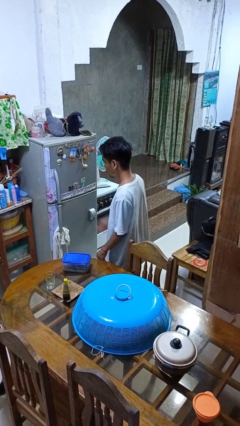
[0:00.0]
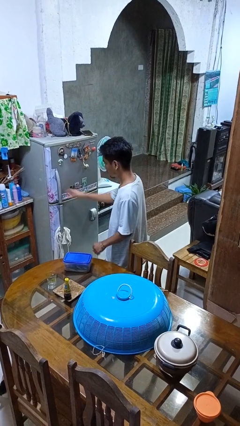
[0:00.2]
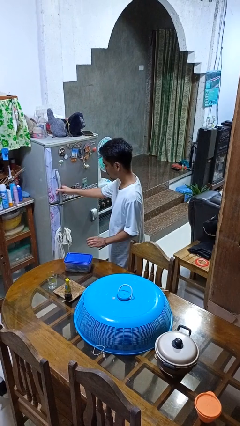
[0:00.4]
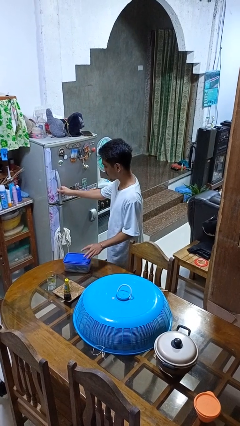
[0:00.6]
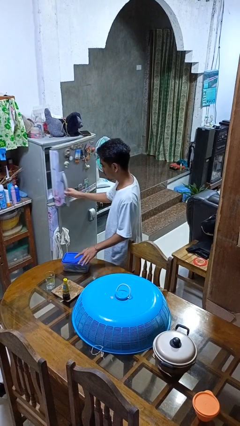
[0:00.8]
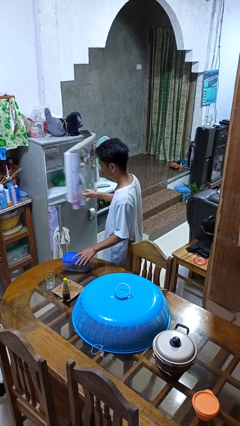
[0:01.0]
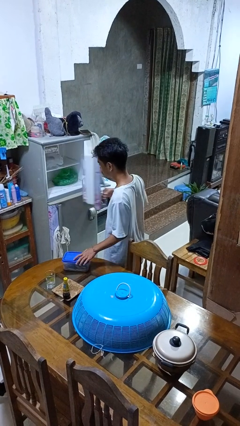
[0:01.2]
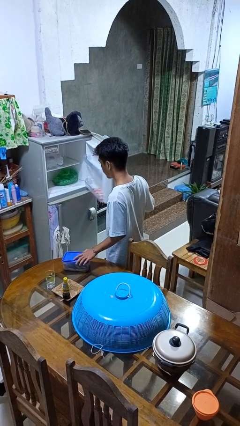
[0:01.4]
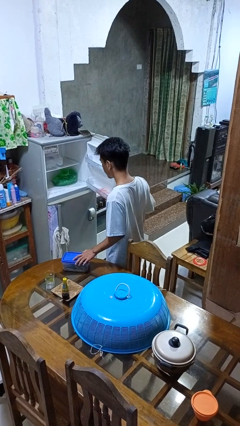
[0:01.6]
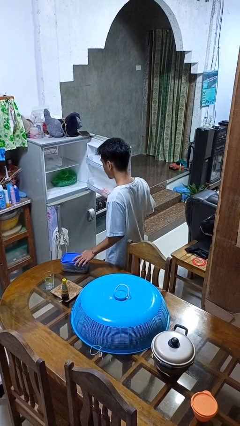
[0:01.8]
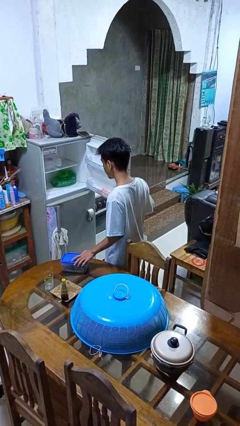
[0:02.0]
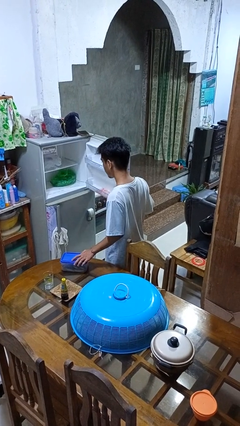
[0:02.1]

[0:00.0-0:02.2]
person opens refrigerator

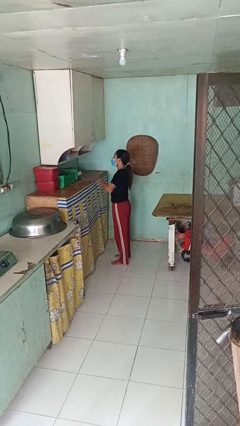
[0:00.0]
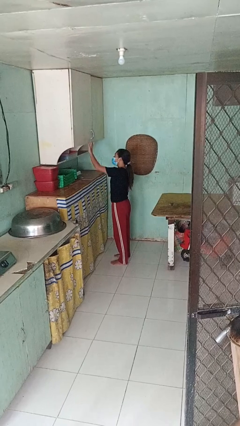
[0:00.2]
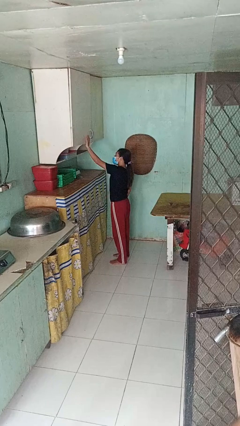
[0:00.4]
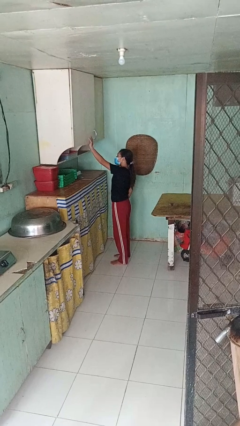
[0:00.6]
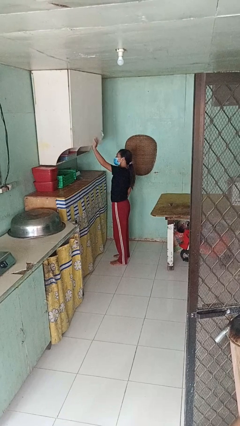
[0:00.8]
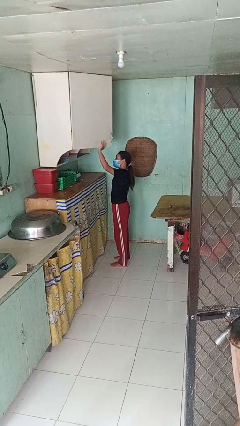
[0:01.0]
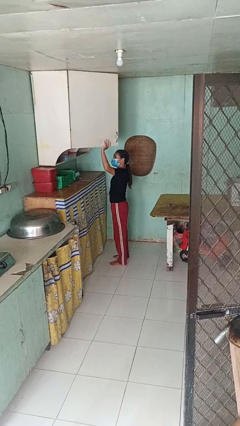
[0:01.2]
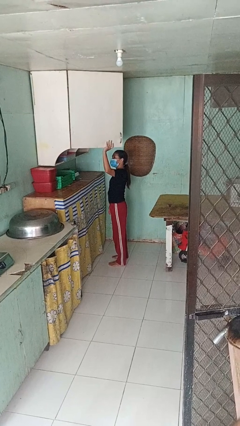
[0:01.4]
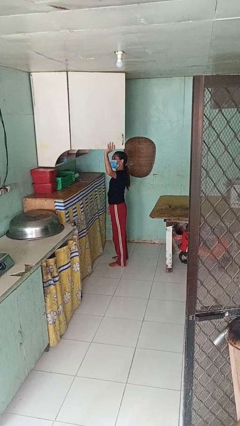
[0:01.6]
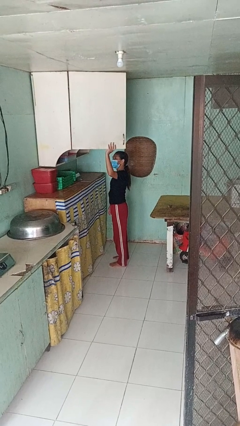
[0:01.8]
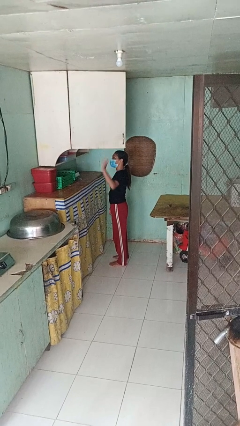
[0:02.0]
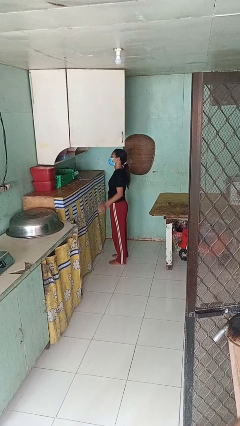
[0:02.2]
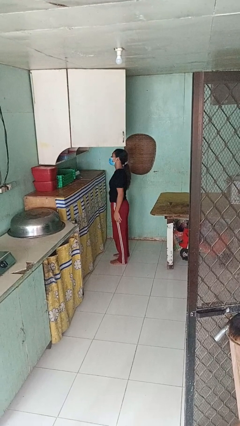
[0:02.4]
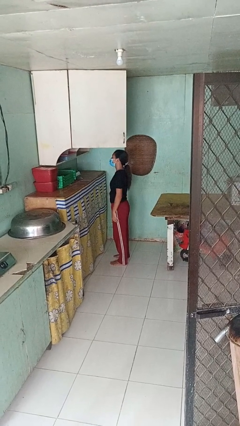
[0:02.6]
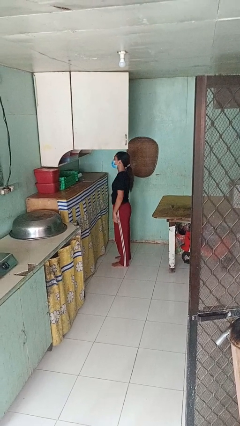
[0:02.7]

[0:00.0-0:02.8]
person opens cabinet

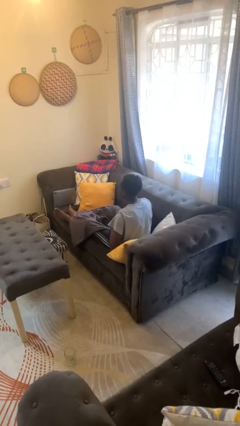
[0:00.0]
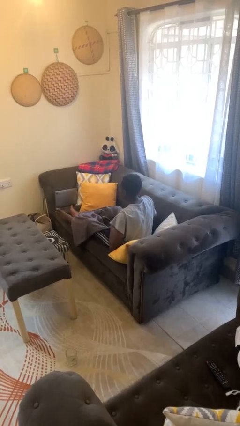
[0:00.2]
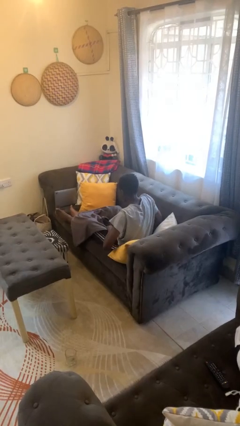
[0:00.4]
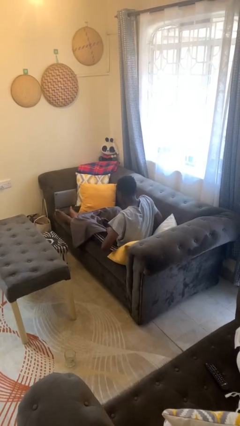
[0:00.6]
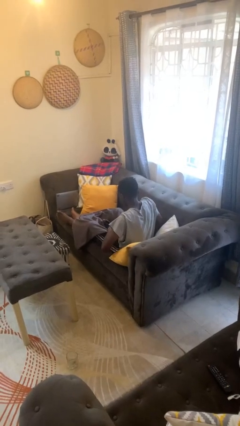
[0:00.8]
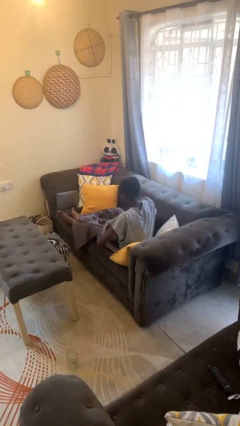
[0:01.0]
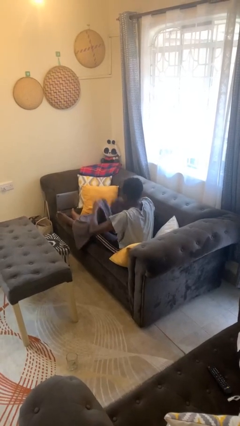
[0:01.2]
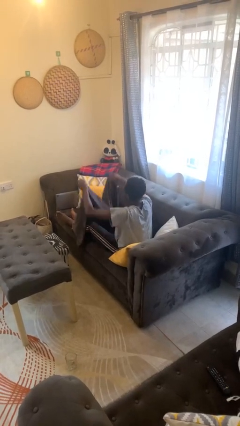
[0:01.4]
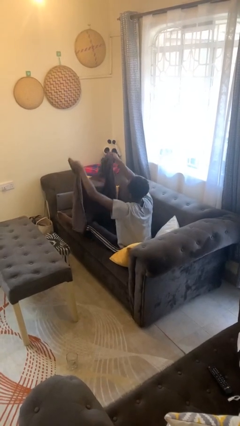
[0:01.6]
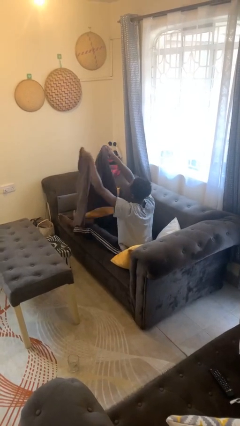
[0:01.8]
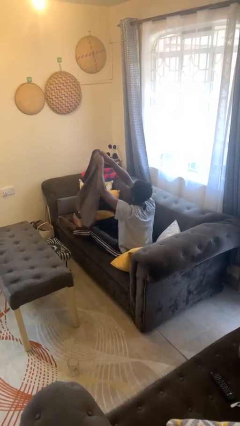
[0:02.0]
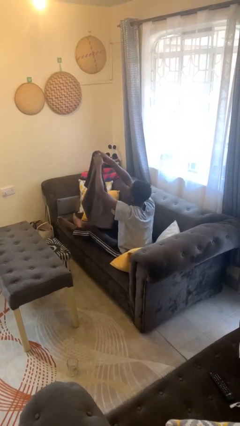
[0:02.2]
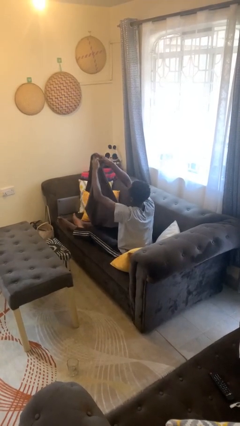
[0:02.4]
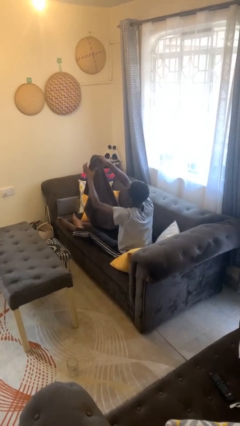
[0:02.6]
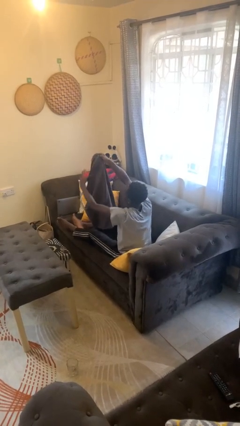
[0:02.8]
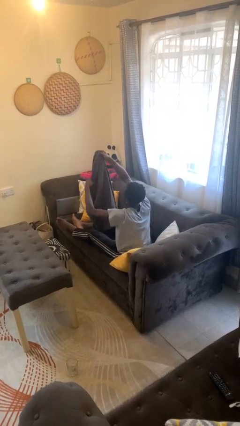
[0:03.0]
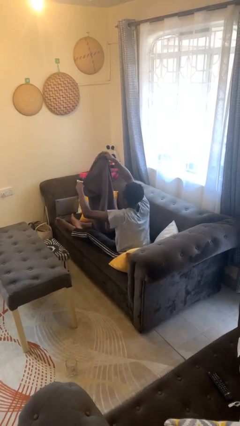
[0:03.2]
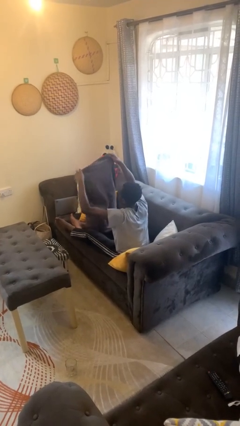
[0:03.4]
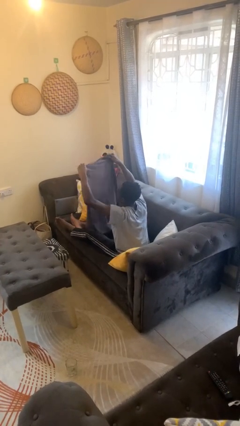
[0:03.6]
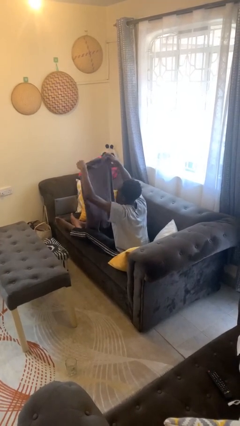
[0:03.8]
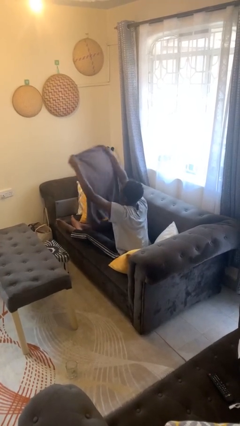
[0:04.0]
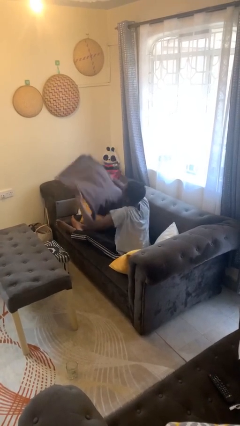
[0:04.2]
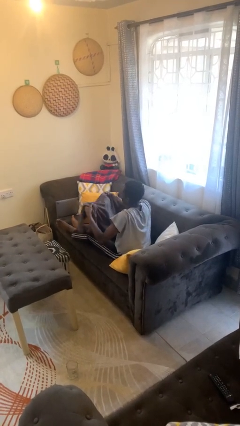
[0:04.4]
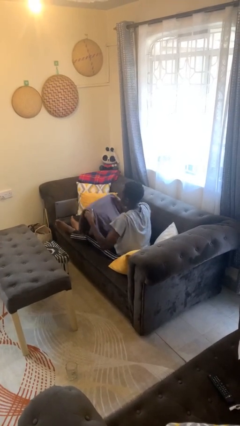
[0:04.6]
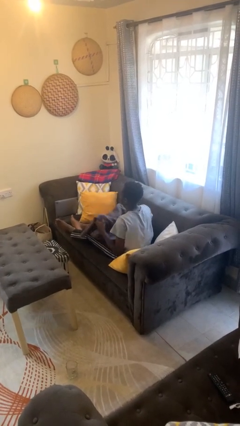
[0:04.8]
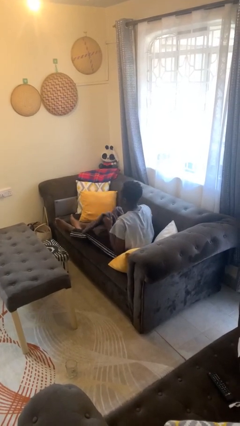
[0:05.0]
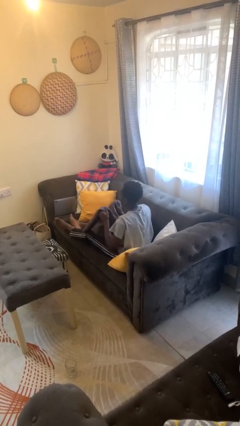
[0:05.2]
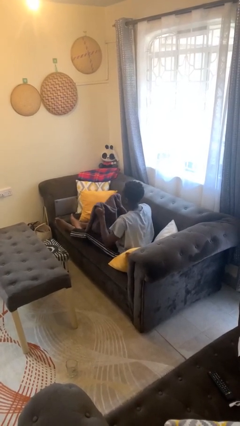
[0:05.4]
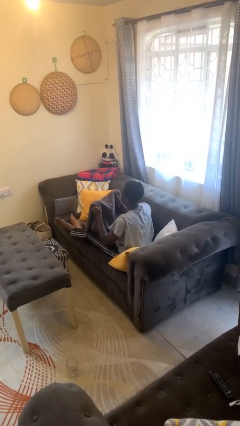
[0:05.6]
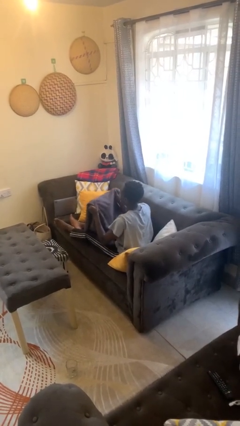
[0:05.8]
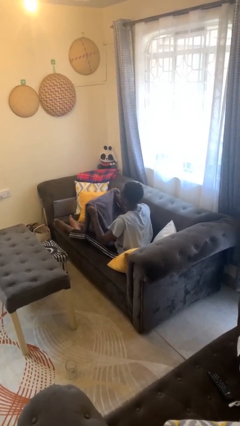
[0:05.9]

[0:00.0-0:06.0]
person folds blanket

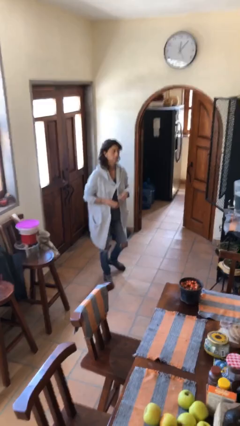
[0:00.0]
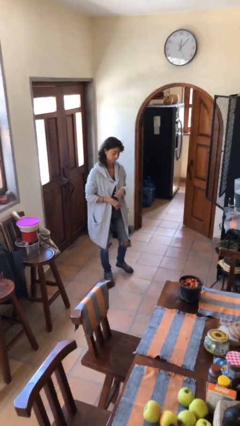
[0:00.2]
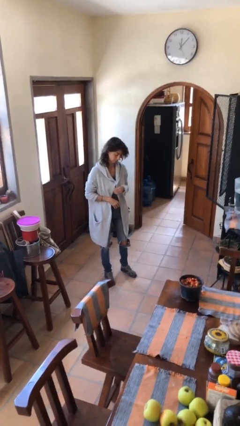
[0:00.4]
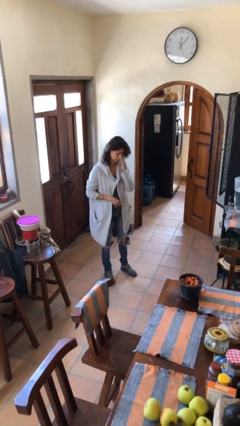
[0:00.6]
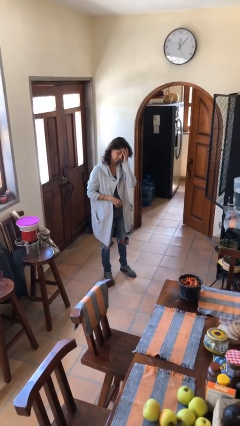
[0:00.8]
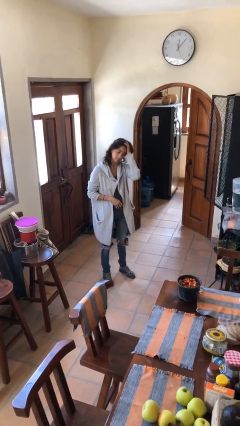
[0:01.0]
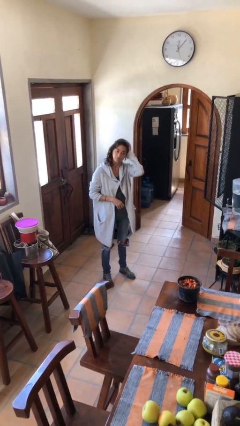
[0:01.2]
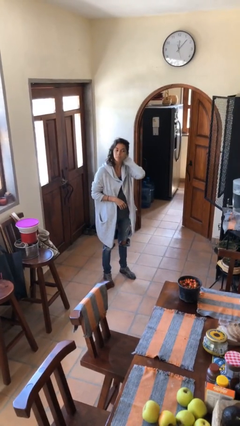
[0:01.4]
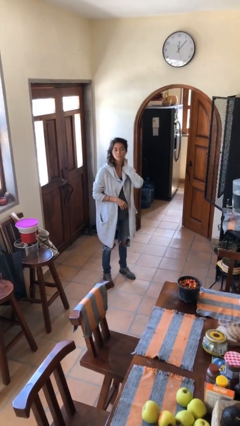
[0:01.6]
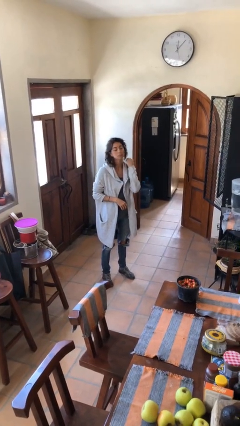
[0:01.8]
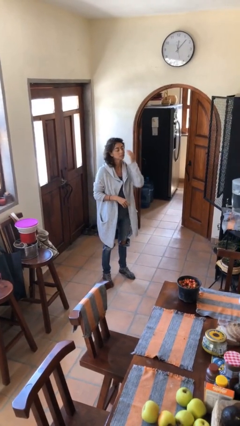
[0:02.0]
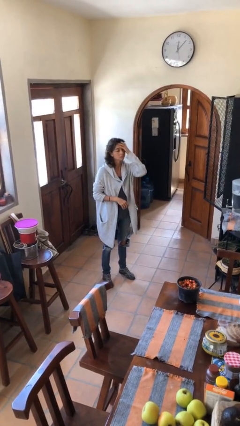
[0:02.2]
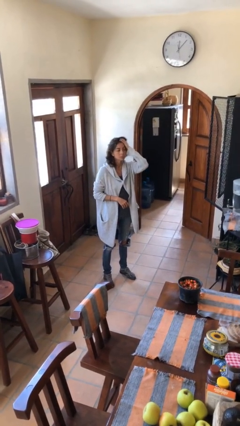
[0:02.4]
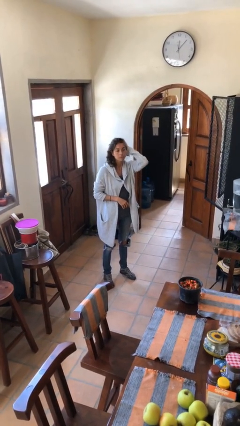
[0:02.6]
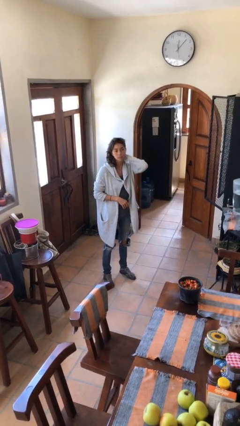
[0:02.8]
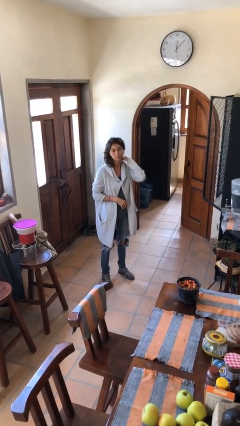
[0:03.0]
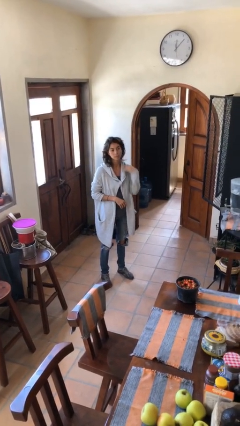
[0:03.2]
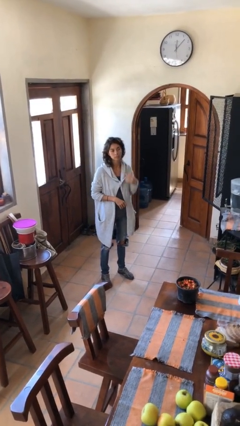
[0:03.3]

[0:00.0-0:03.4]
person strokes hair

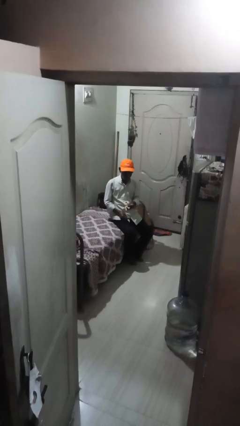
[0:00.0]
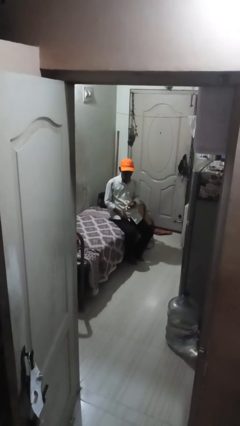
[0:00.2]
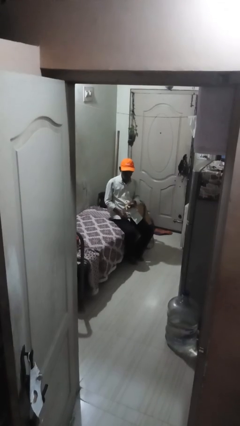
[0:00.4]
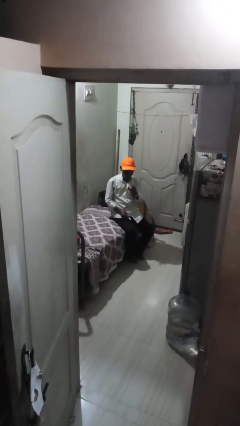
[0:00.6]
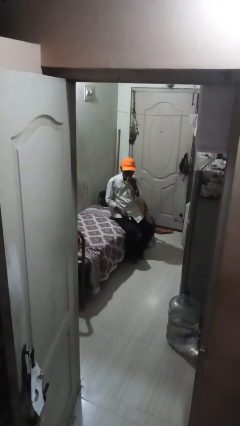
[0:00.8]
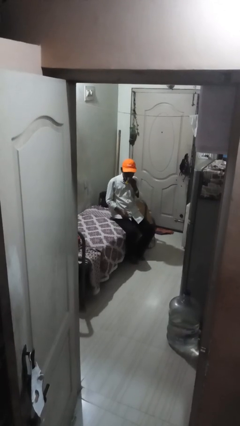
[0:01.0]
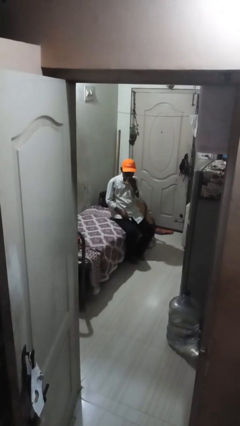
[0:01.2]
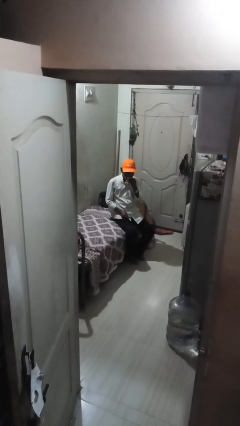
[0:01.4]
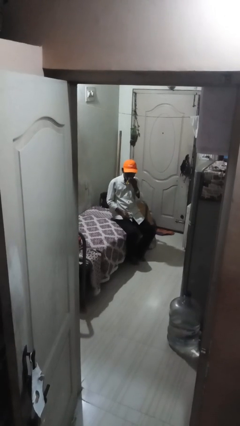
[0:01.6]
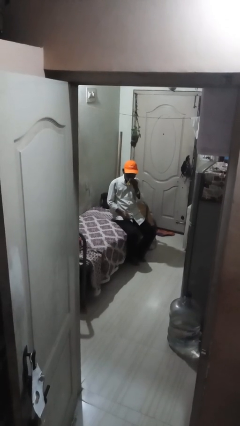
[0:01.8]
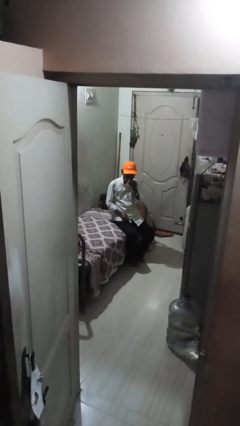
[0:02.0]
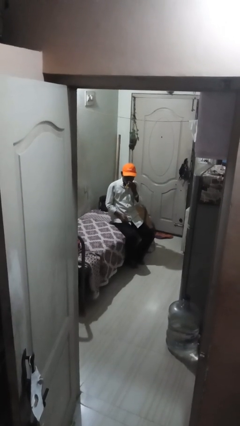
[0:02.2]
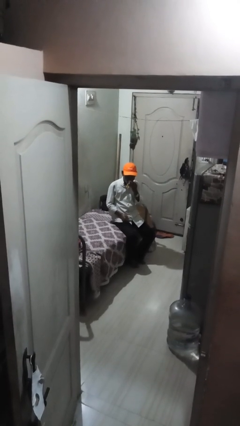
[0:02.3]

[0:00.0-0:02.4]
person eats banana

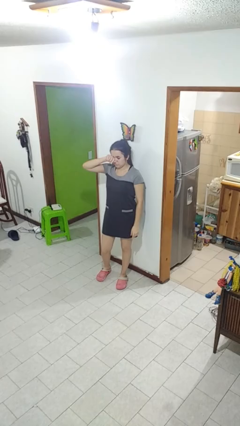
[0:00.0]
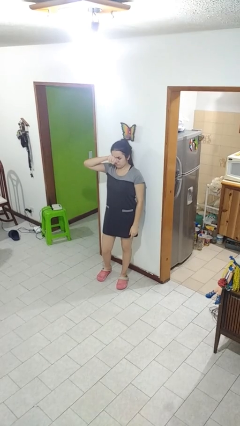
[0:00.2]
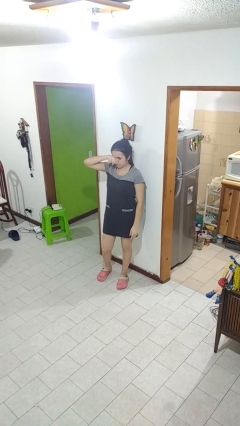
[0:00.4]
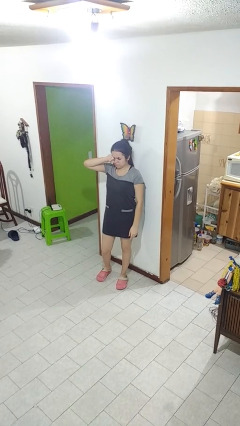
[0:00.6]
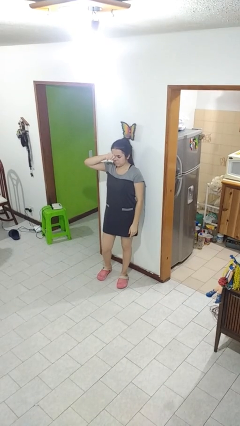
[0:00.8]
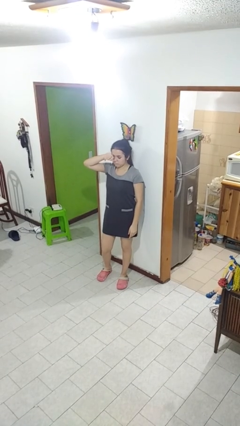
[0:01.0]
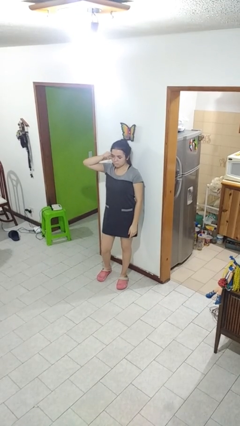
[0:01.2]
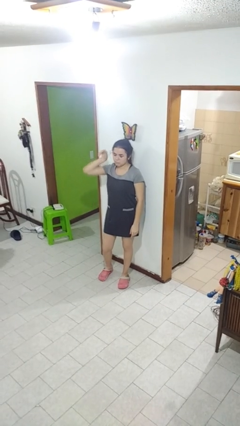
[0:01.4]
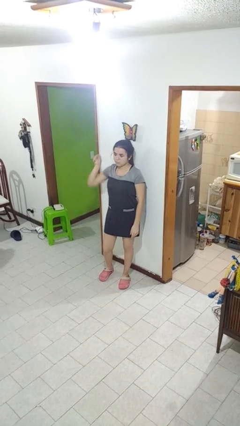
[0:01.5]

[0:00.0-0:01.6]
person rubs eyes
